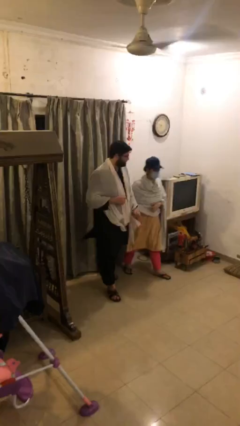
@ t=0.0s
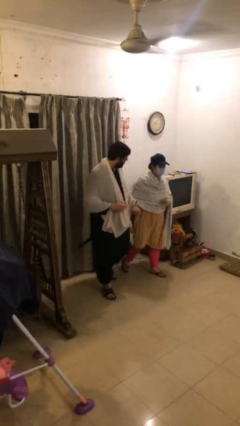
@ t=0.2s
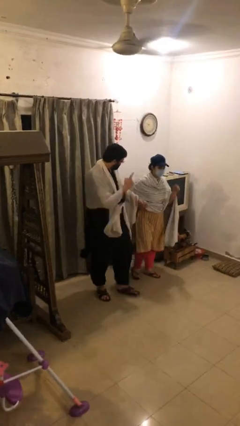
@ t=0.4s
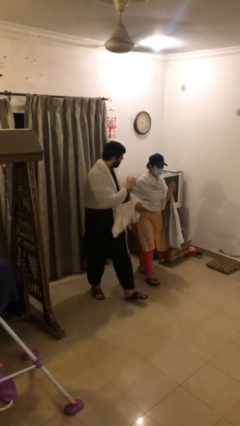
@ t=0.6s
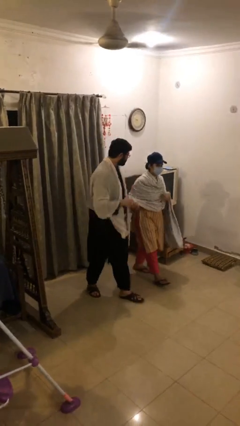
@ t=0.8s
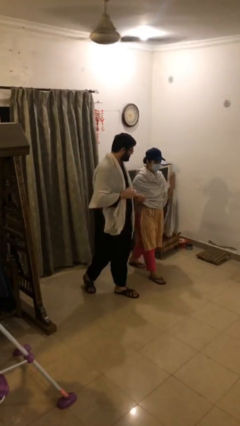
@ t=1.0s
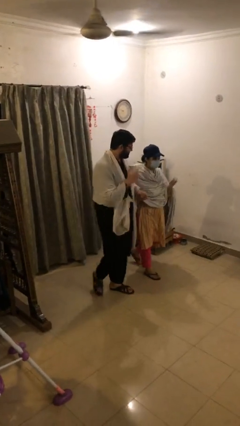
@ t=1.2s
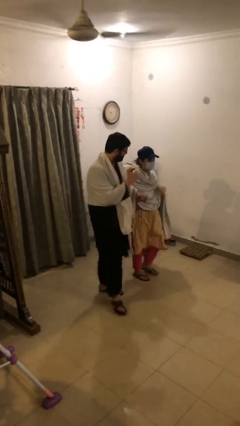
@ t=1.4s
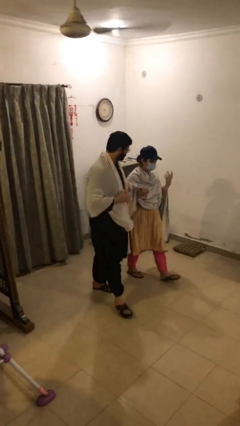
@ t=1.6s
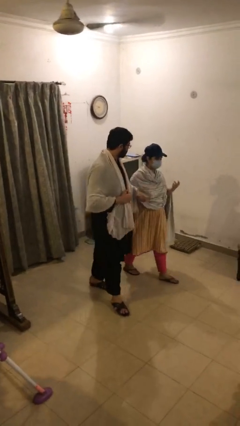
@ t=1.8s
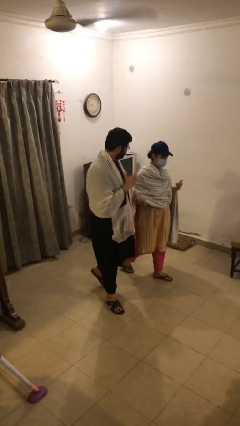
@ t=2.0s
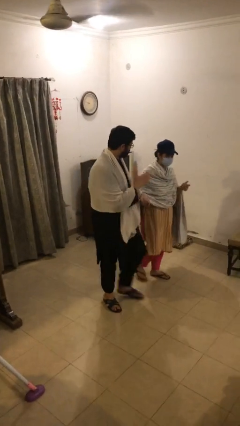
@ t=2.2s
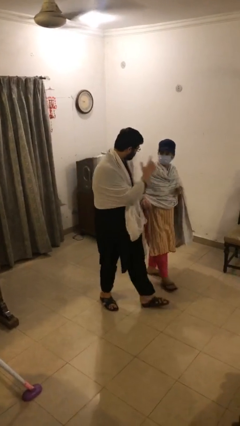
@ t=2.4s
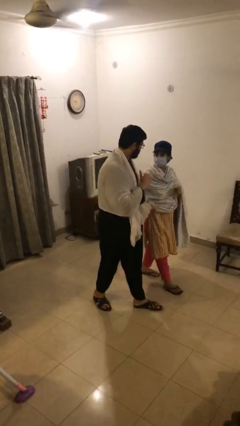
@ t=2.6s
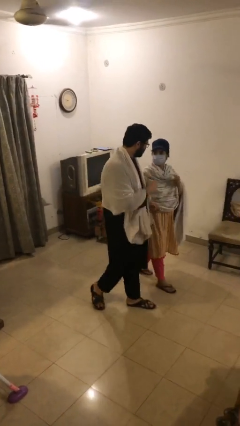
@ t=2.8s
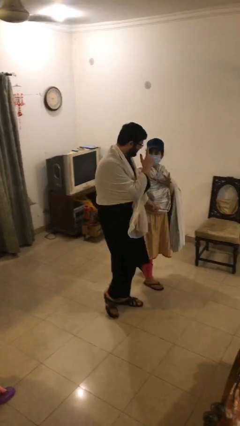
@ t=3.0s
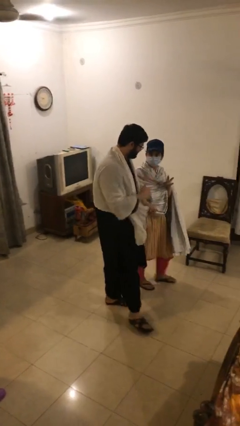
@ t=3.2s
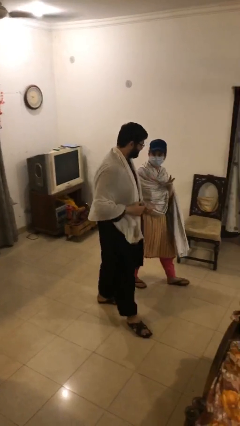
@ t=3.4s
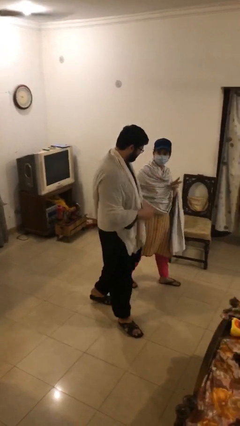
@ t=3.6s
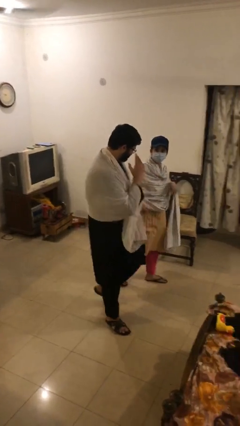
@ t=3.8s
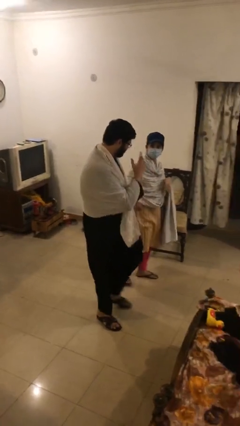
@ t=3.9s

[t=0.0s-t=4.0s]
person holds hand

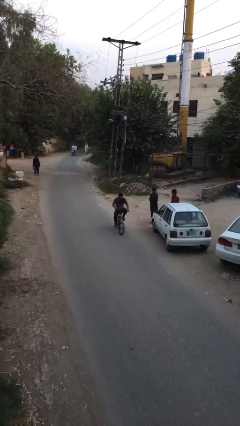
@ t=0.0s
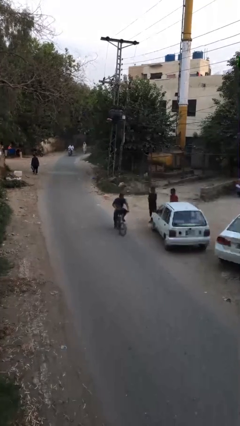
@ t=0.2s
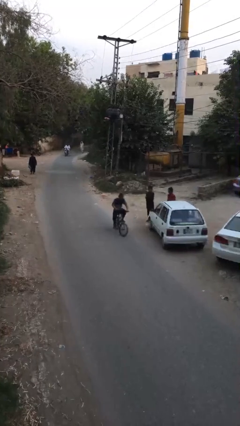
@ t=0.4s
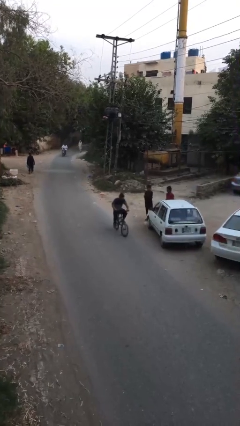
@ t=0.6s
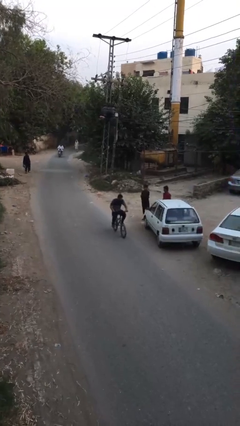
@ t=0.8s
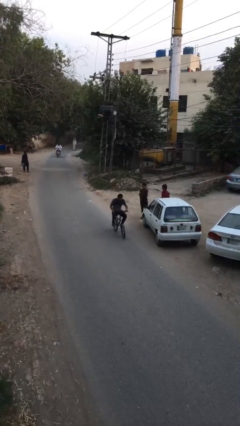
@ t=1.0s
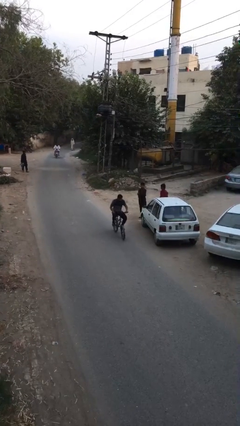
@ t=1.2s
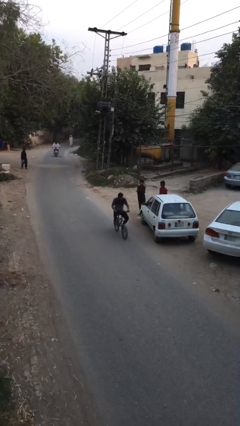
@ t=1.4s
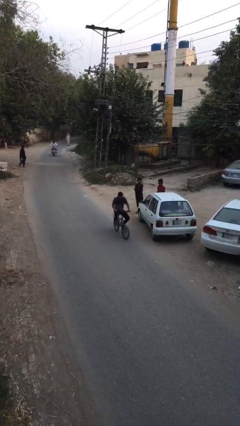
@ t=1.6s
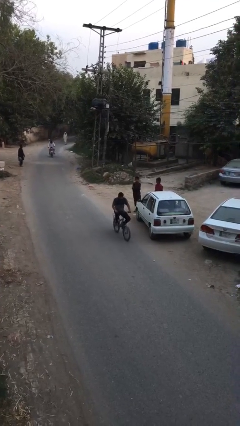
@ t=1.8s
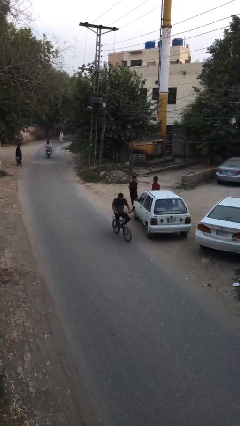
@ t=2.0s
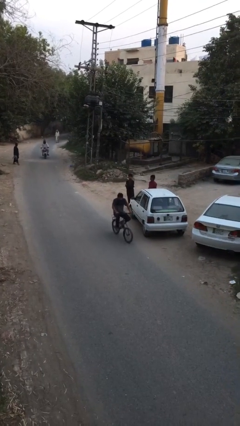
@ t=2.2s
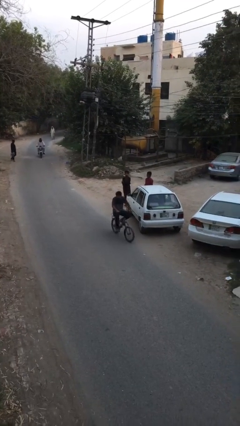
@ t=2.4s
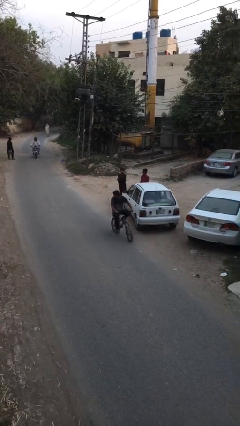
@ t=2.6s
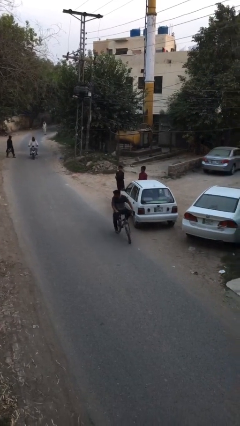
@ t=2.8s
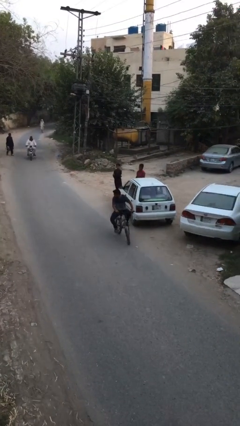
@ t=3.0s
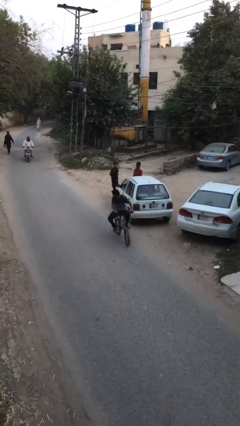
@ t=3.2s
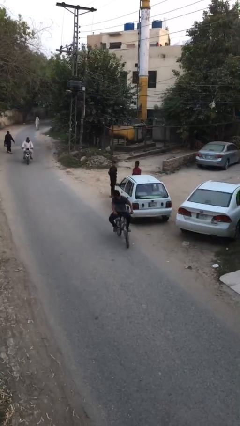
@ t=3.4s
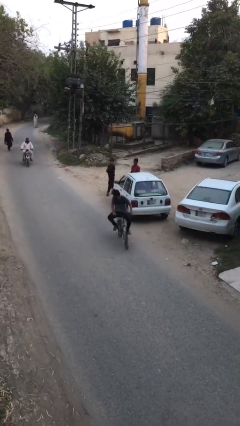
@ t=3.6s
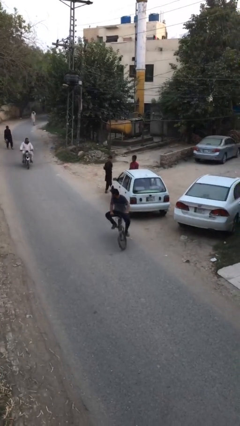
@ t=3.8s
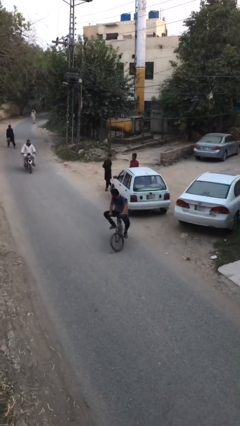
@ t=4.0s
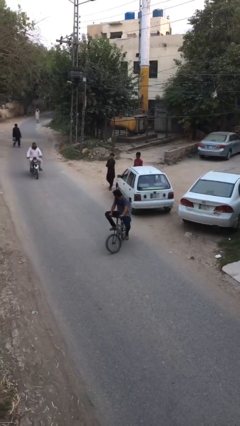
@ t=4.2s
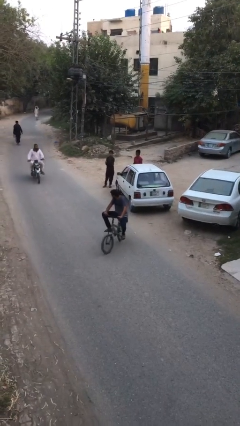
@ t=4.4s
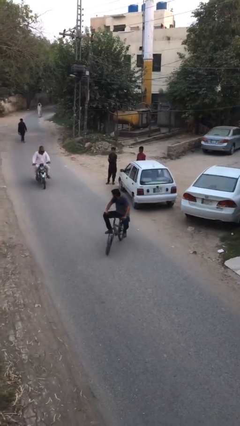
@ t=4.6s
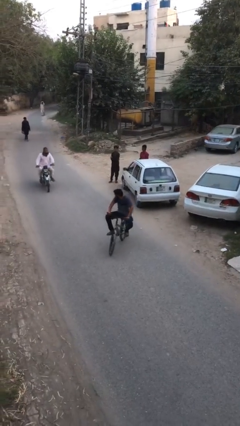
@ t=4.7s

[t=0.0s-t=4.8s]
person rides bicycle

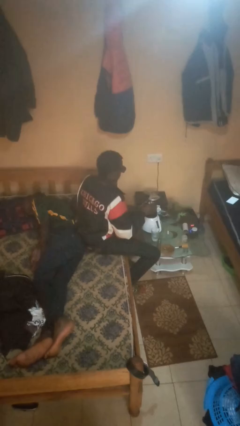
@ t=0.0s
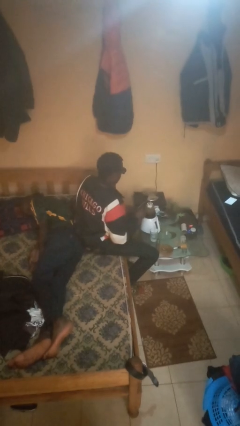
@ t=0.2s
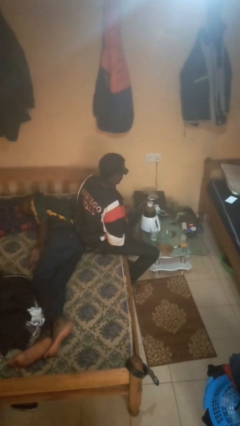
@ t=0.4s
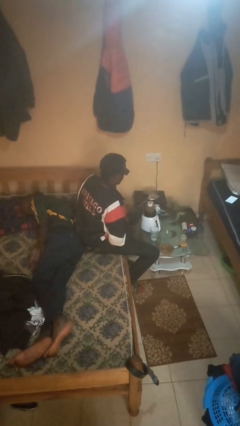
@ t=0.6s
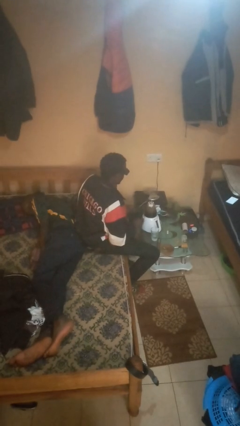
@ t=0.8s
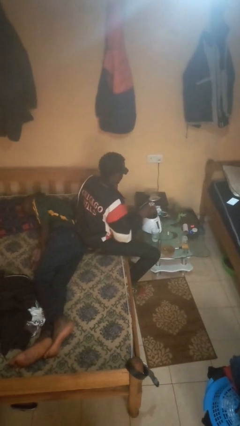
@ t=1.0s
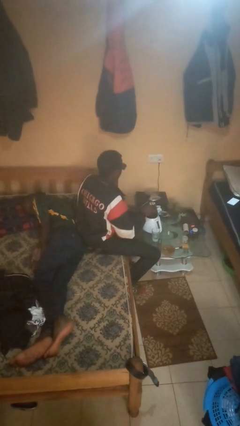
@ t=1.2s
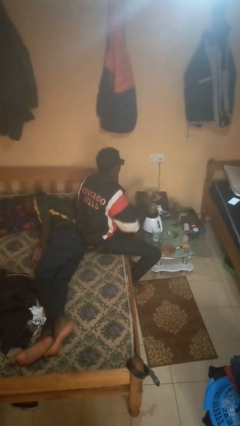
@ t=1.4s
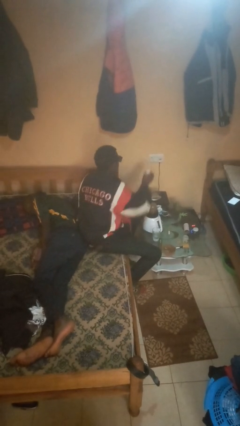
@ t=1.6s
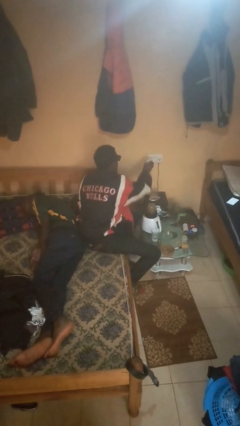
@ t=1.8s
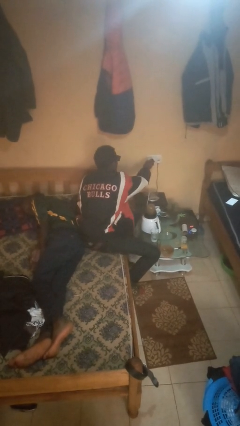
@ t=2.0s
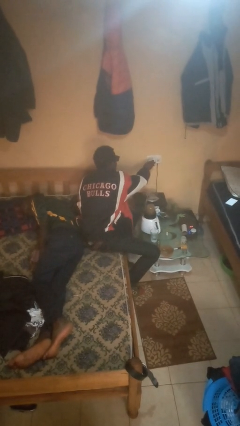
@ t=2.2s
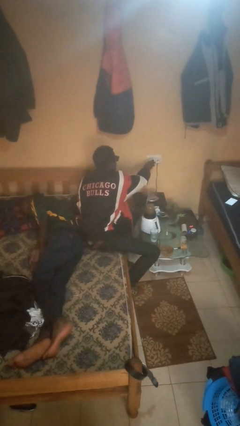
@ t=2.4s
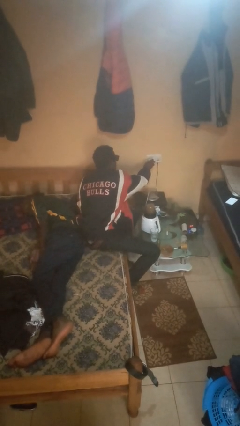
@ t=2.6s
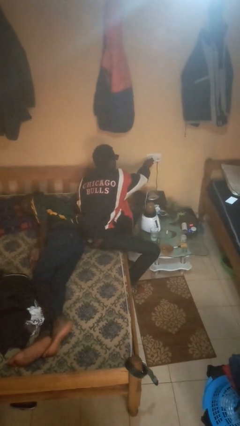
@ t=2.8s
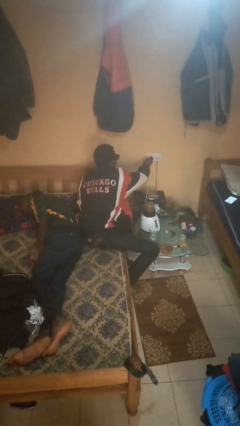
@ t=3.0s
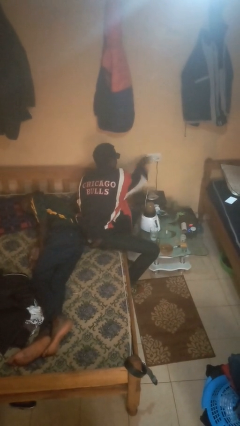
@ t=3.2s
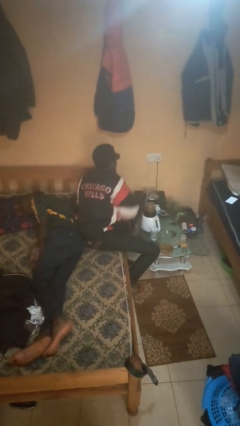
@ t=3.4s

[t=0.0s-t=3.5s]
person plugs into electrical socket

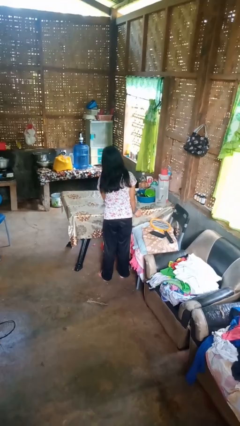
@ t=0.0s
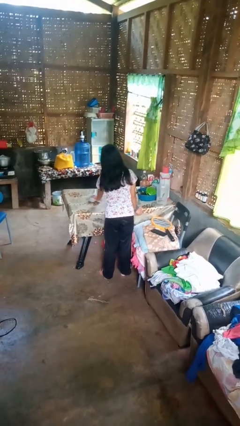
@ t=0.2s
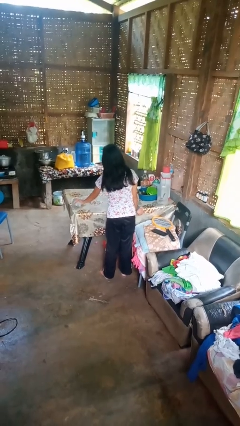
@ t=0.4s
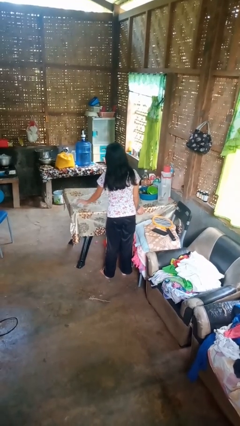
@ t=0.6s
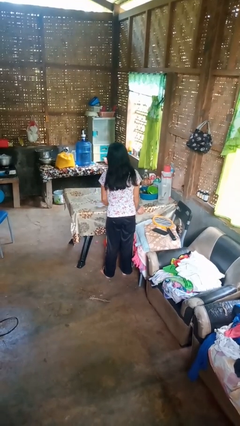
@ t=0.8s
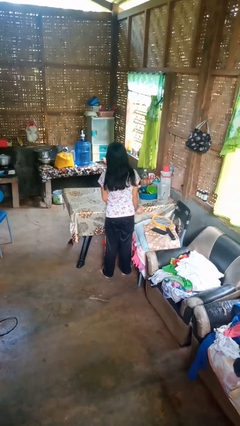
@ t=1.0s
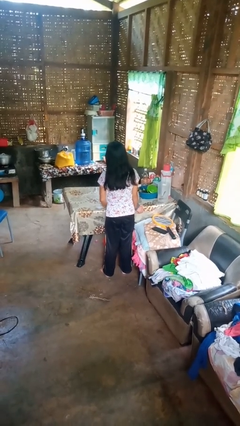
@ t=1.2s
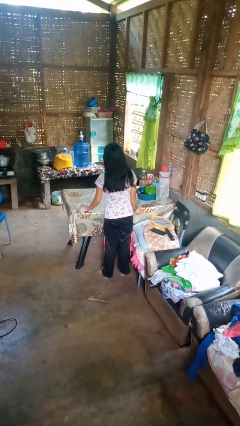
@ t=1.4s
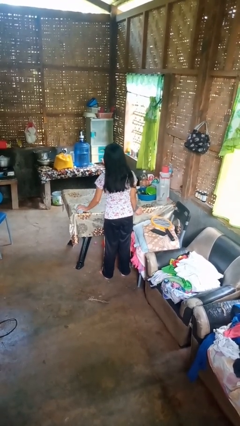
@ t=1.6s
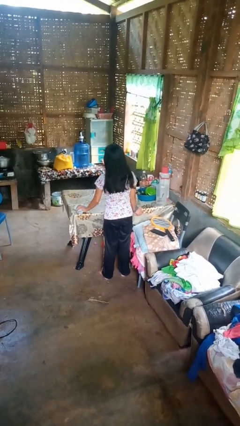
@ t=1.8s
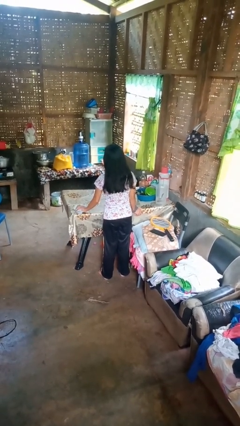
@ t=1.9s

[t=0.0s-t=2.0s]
person cleans table with rag

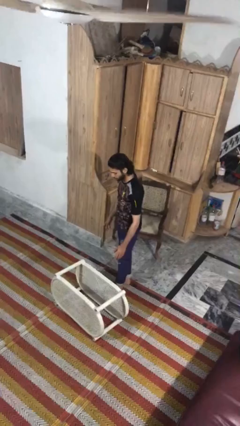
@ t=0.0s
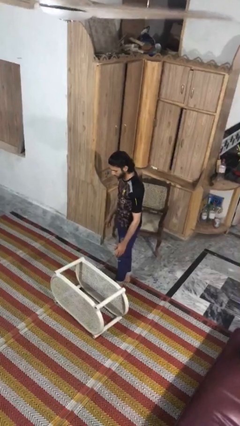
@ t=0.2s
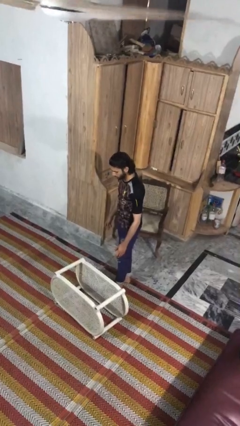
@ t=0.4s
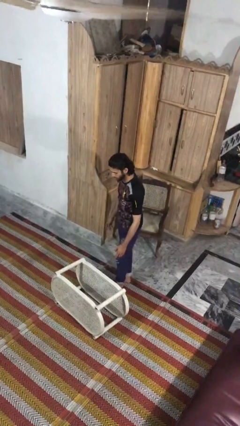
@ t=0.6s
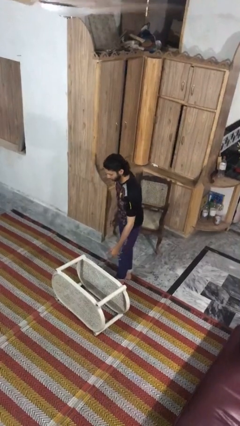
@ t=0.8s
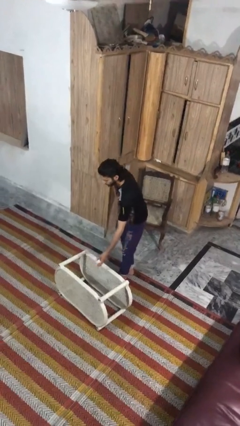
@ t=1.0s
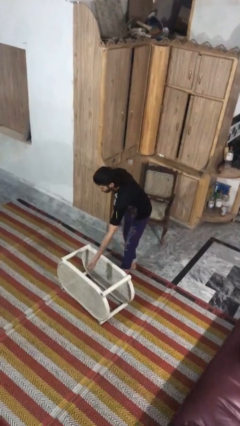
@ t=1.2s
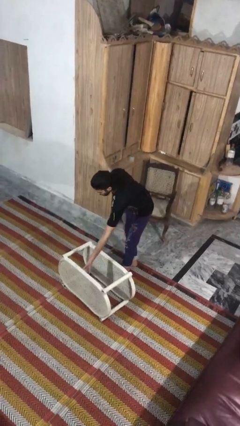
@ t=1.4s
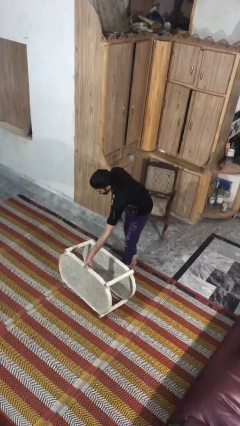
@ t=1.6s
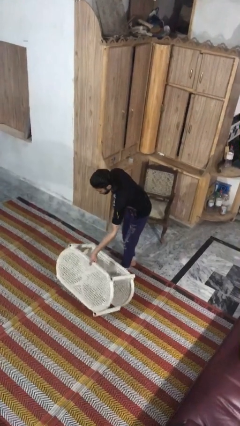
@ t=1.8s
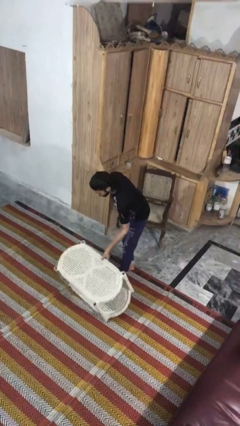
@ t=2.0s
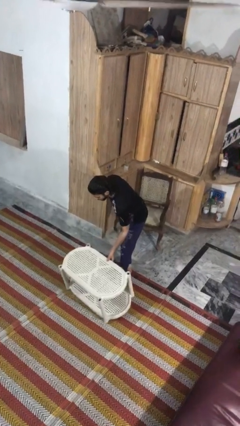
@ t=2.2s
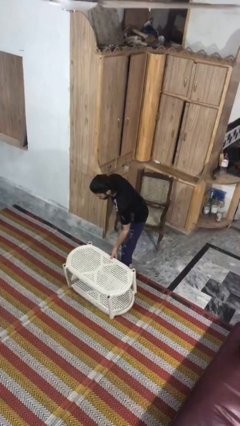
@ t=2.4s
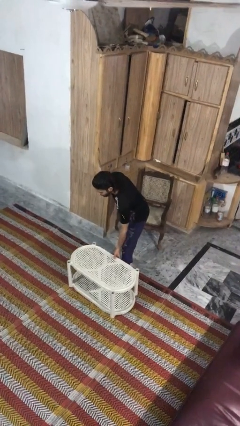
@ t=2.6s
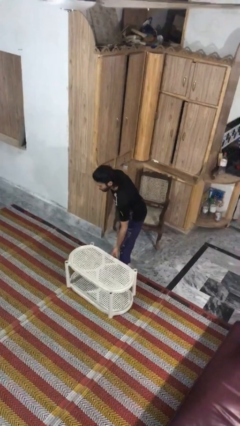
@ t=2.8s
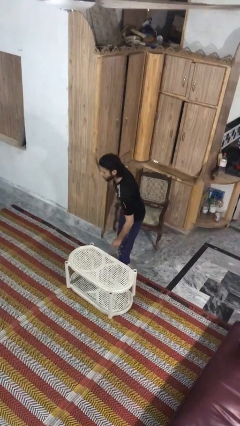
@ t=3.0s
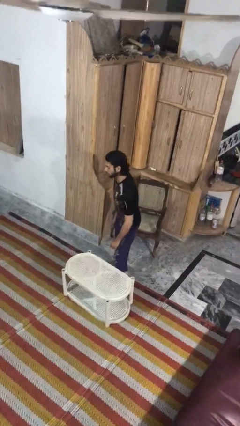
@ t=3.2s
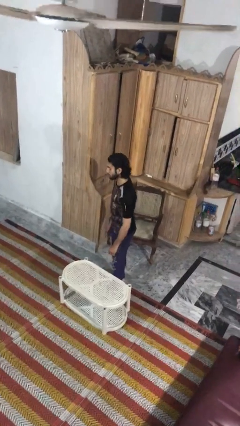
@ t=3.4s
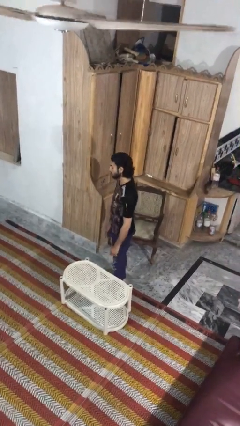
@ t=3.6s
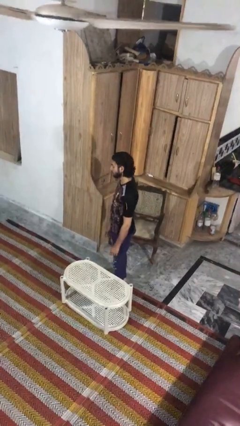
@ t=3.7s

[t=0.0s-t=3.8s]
person sets upright furniture

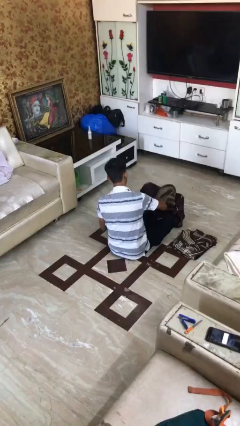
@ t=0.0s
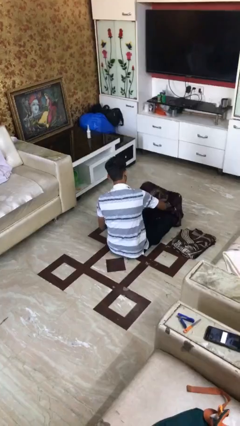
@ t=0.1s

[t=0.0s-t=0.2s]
person loads clothes into suitcase
